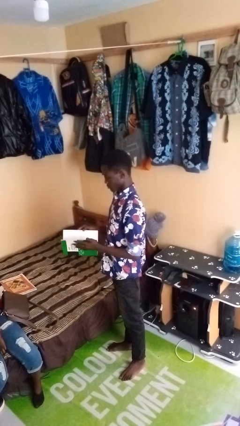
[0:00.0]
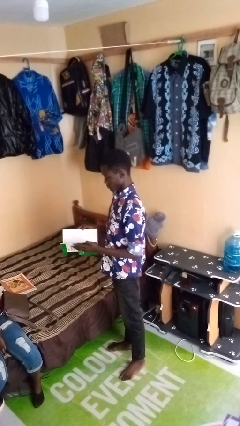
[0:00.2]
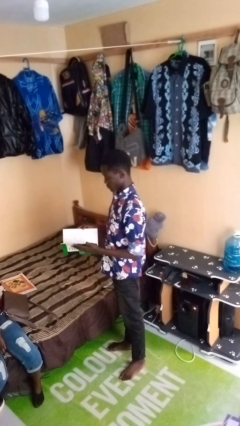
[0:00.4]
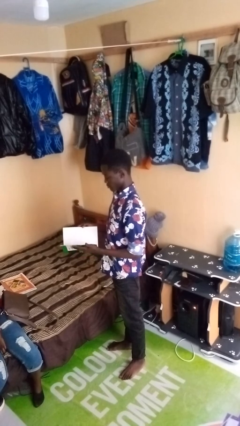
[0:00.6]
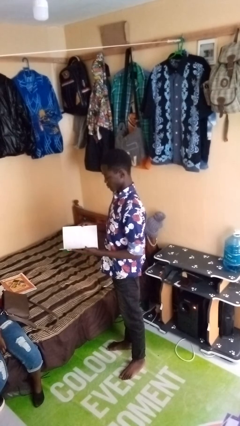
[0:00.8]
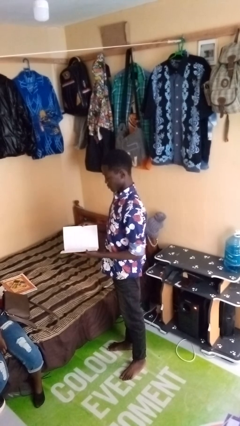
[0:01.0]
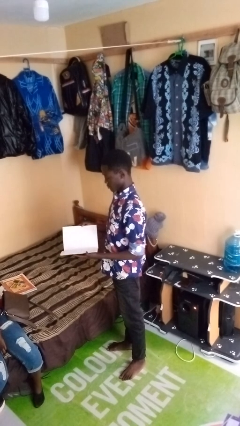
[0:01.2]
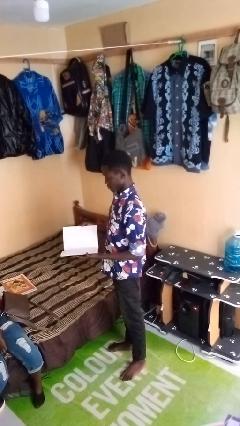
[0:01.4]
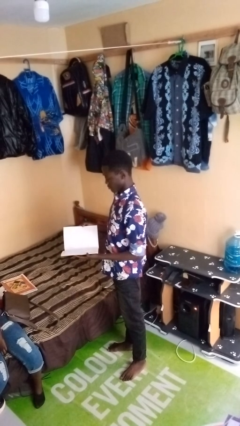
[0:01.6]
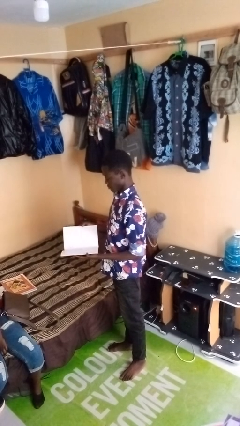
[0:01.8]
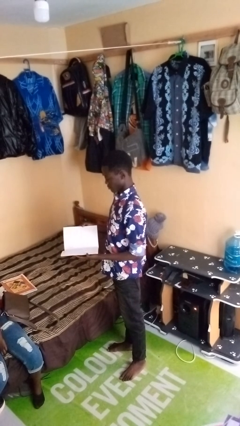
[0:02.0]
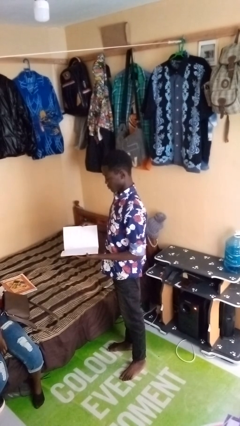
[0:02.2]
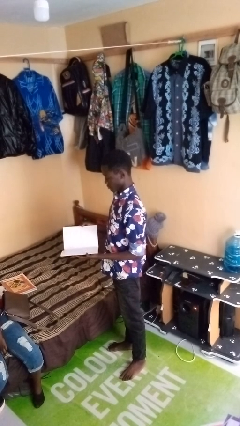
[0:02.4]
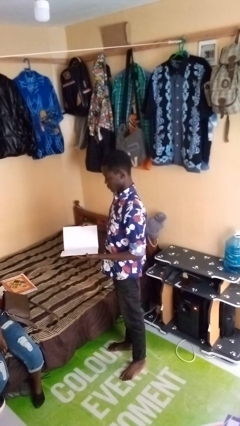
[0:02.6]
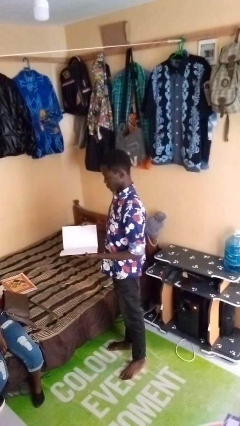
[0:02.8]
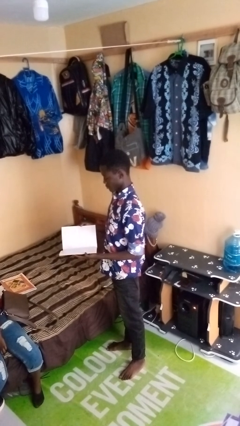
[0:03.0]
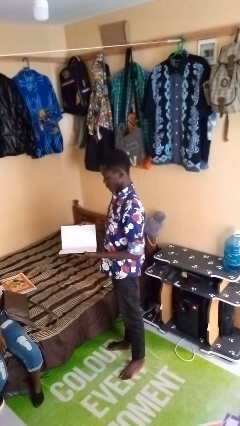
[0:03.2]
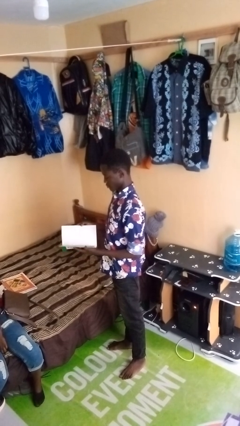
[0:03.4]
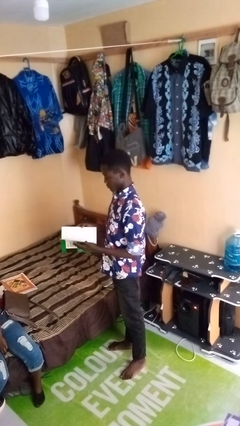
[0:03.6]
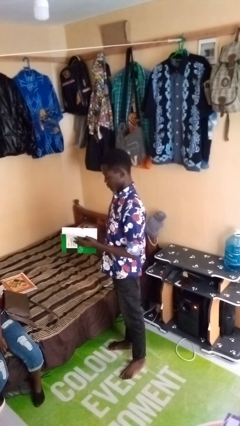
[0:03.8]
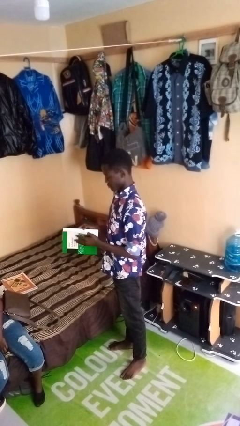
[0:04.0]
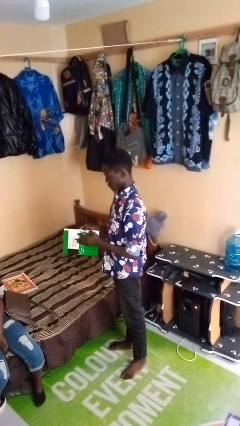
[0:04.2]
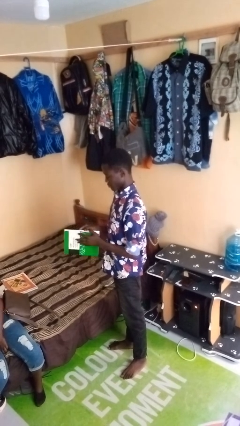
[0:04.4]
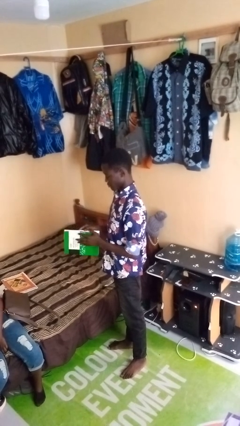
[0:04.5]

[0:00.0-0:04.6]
person reads magazine

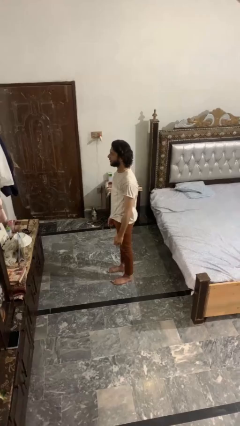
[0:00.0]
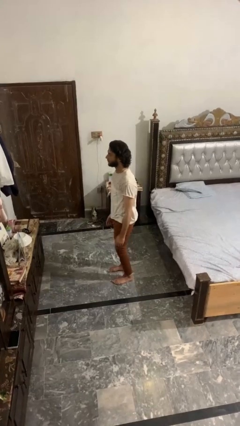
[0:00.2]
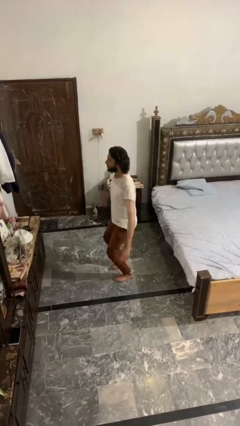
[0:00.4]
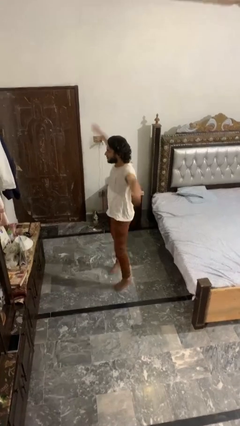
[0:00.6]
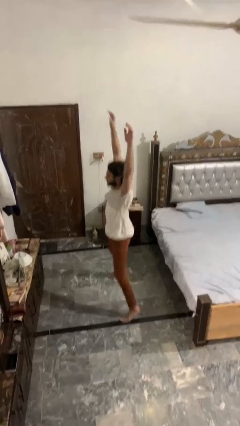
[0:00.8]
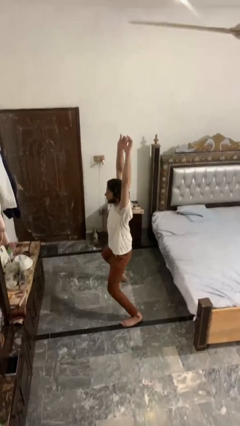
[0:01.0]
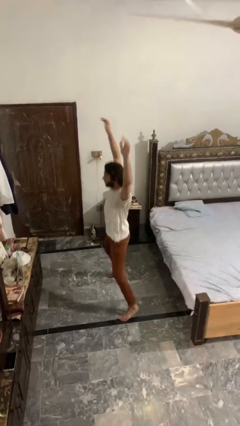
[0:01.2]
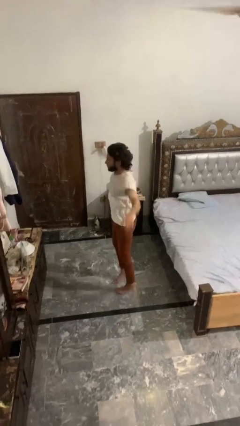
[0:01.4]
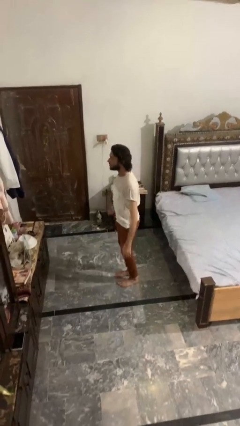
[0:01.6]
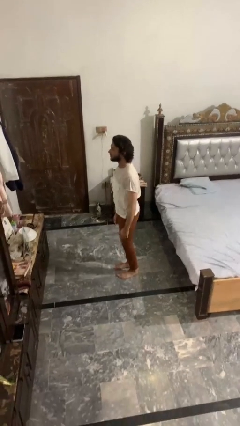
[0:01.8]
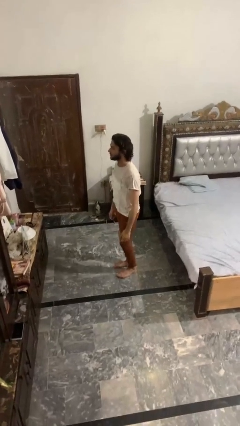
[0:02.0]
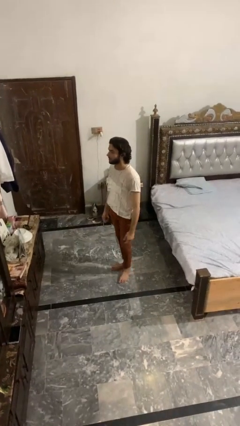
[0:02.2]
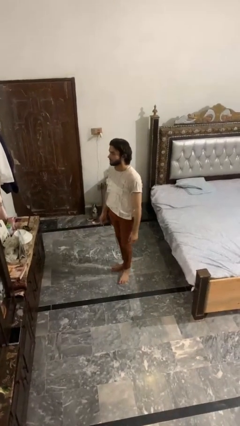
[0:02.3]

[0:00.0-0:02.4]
person exercises with jumping jacks

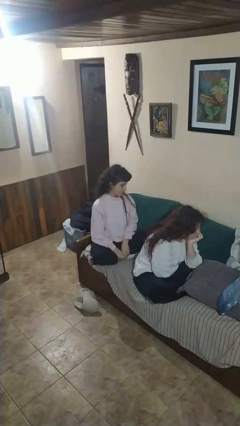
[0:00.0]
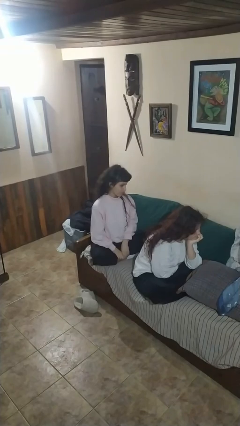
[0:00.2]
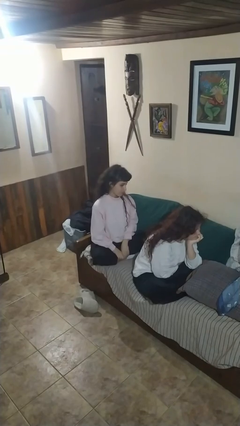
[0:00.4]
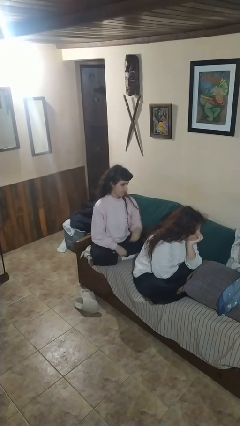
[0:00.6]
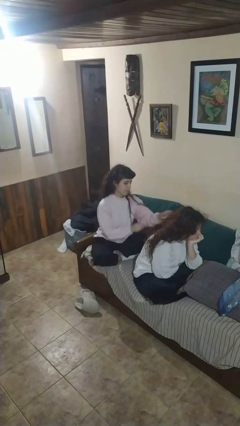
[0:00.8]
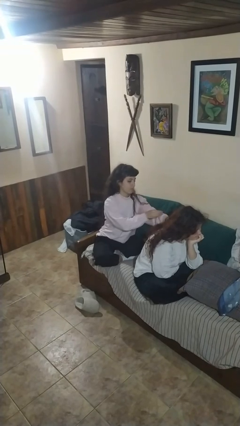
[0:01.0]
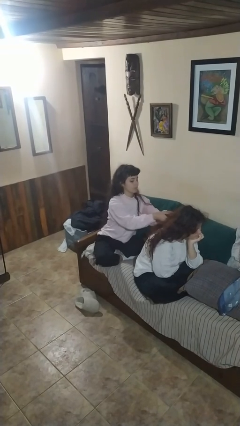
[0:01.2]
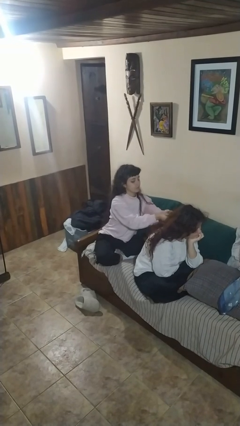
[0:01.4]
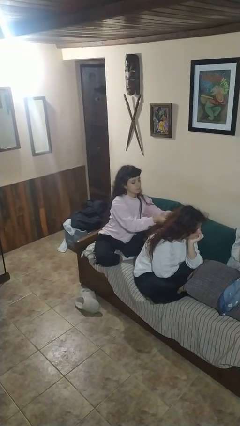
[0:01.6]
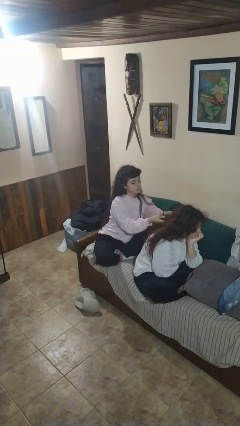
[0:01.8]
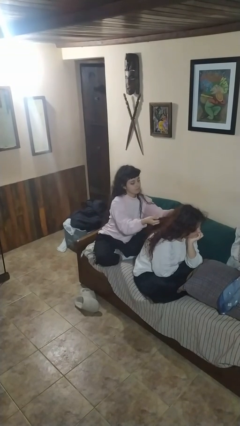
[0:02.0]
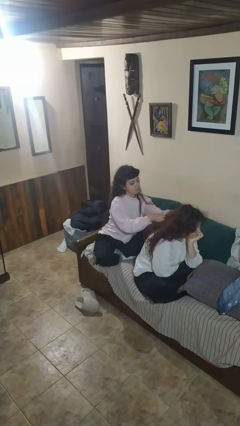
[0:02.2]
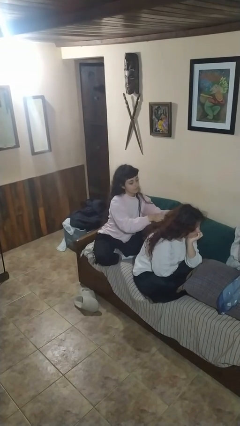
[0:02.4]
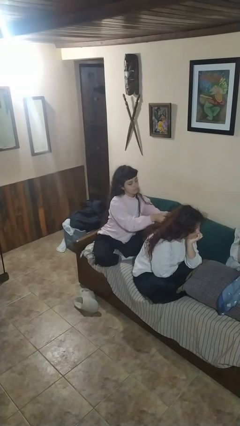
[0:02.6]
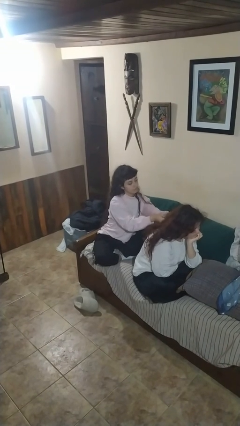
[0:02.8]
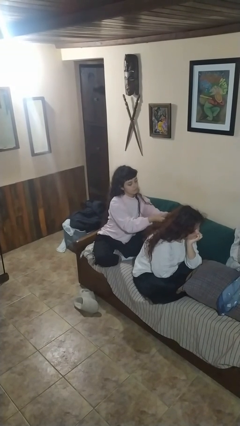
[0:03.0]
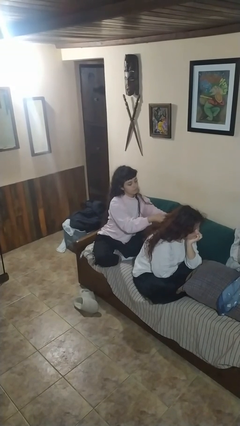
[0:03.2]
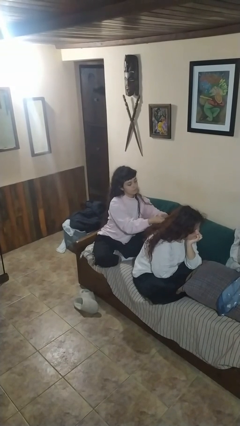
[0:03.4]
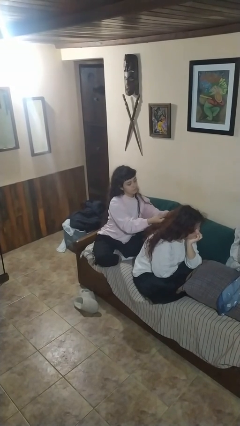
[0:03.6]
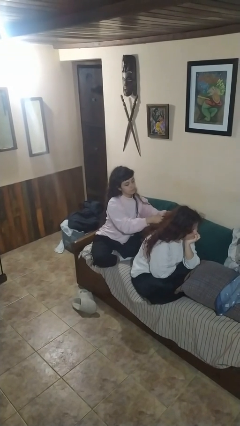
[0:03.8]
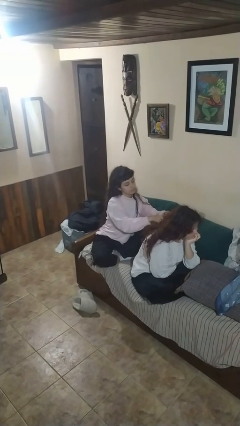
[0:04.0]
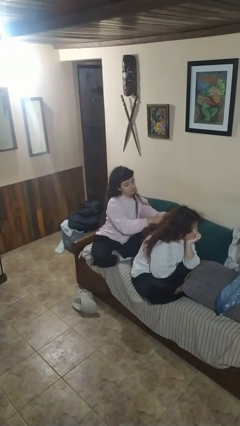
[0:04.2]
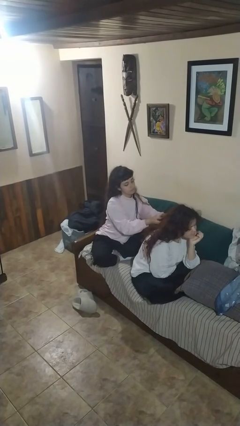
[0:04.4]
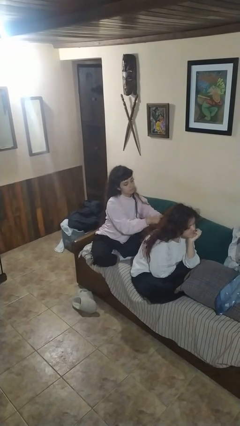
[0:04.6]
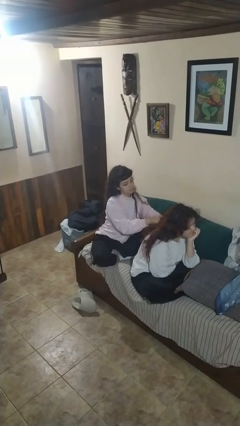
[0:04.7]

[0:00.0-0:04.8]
person braids hair of person

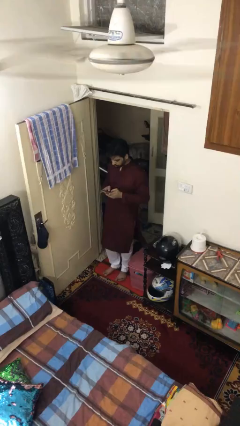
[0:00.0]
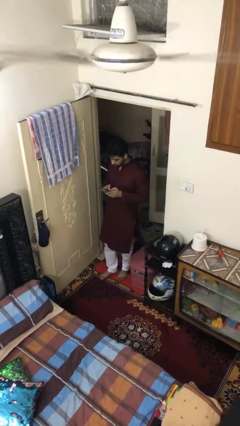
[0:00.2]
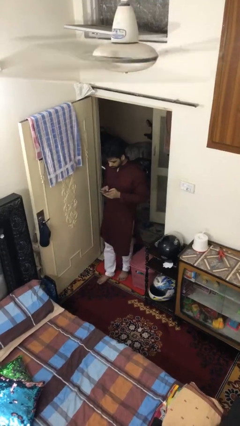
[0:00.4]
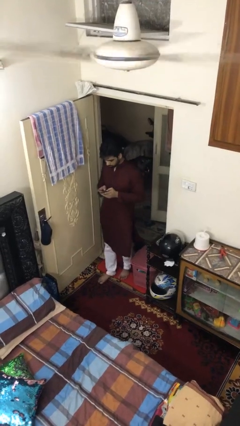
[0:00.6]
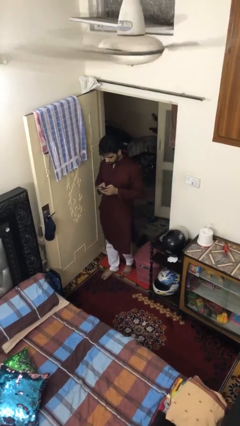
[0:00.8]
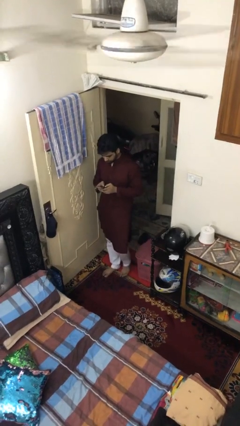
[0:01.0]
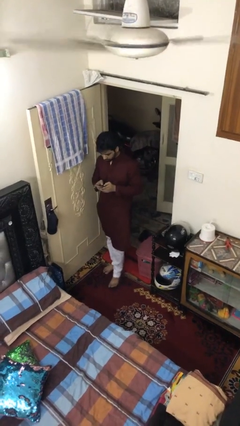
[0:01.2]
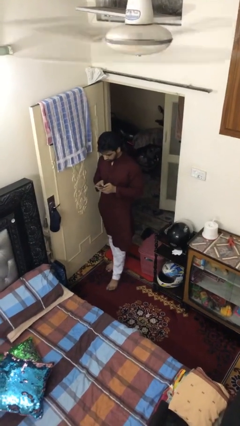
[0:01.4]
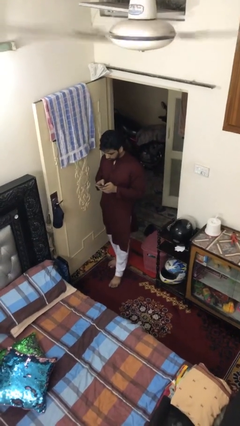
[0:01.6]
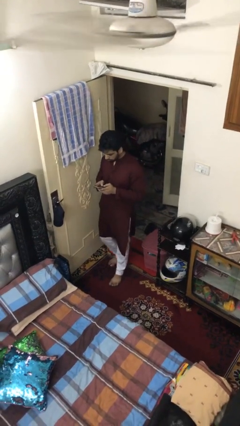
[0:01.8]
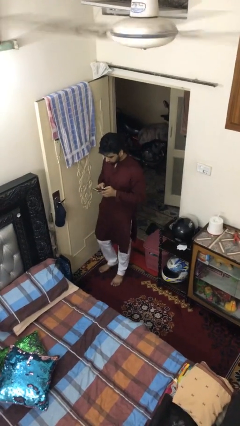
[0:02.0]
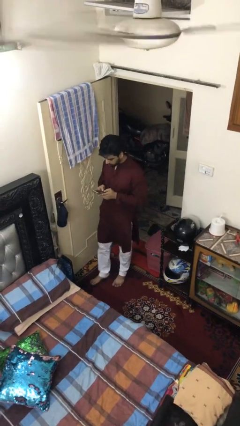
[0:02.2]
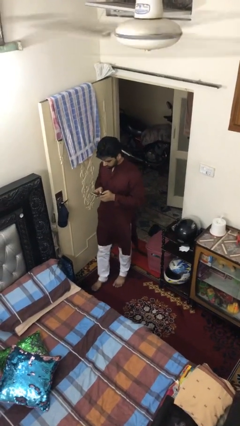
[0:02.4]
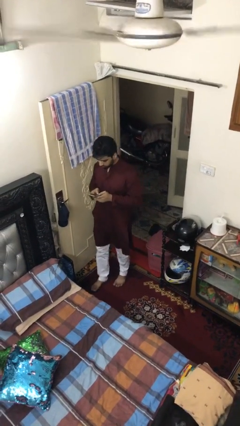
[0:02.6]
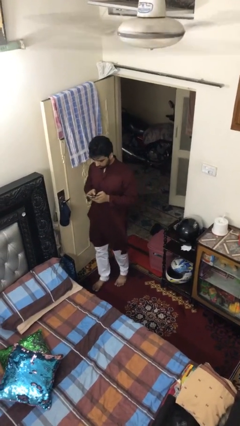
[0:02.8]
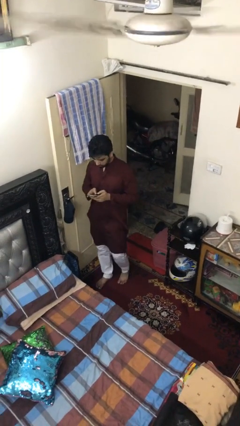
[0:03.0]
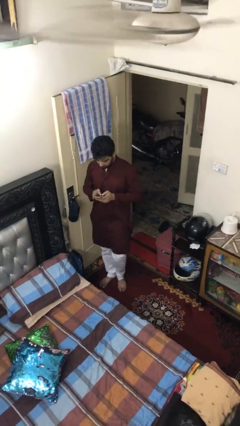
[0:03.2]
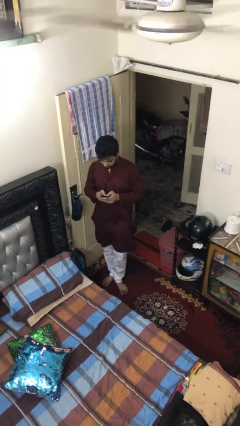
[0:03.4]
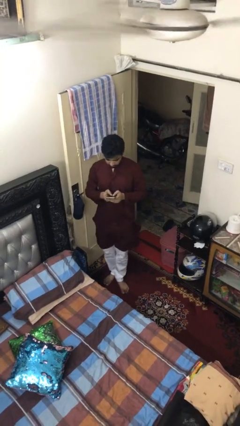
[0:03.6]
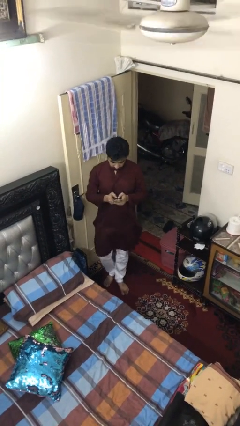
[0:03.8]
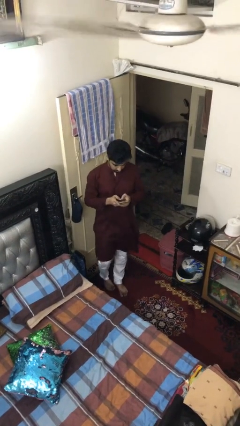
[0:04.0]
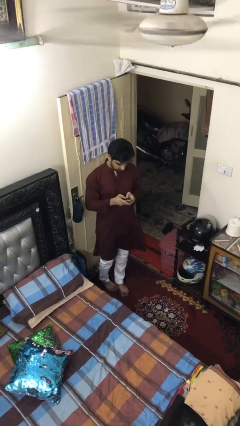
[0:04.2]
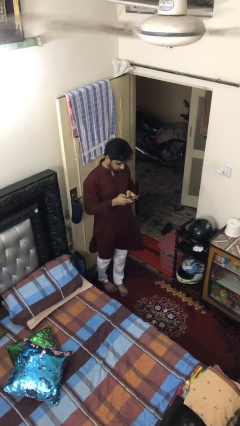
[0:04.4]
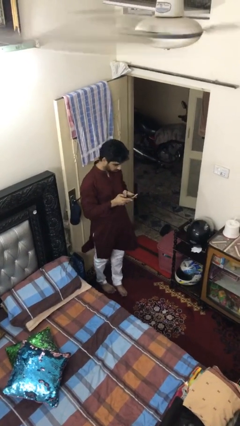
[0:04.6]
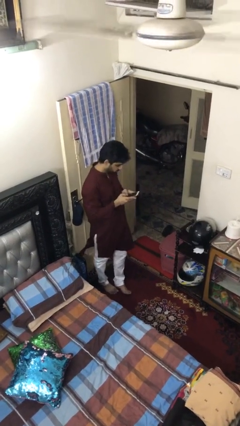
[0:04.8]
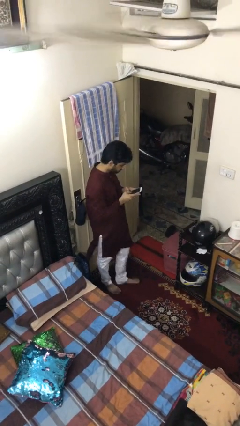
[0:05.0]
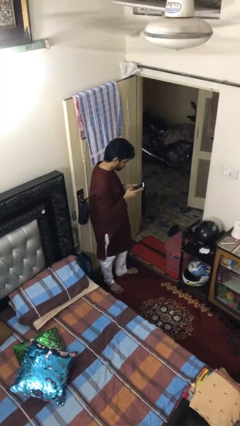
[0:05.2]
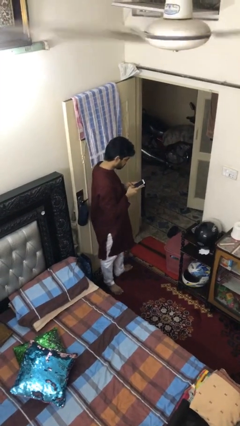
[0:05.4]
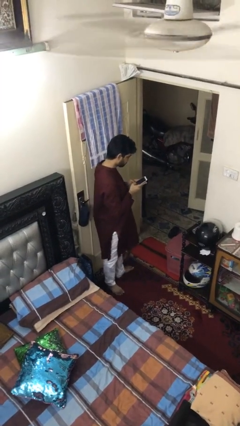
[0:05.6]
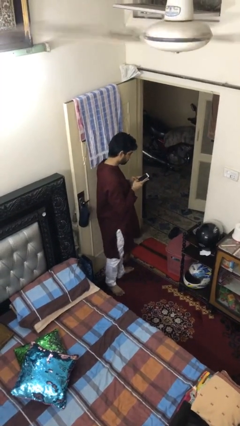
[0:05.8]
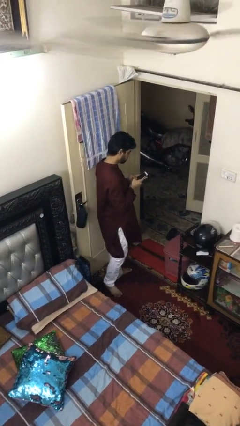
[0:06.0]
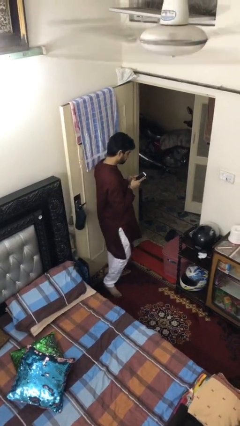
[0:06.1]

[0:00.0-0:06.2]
person texts on phone
